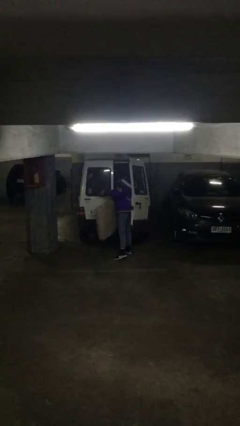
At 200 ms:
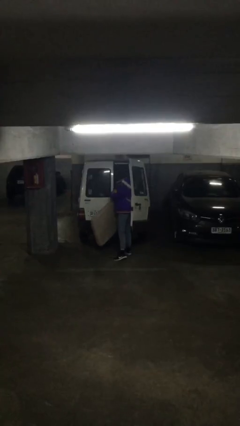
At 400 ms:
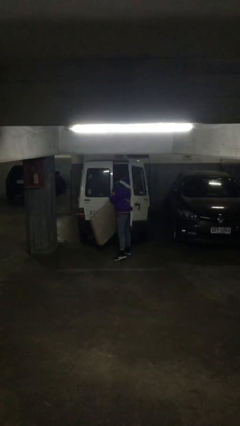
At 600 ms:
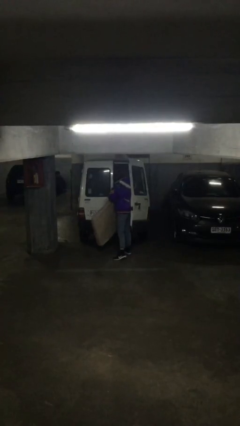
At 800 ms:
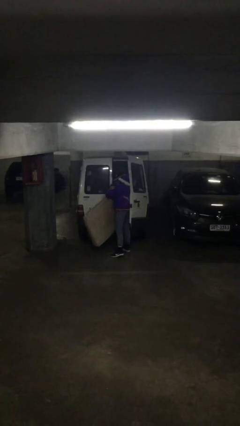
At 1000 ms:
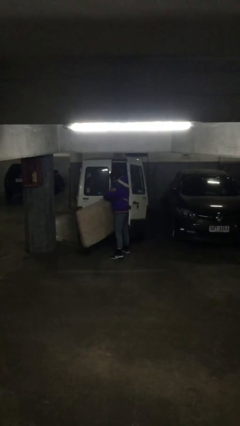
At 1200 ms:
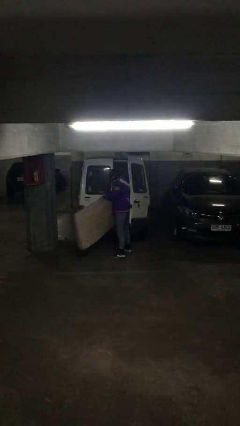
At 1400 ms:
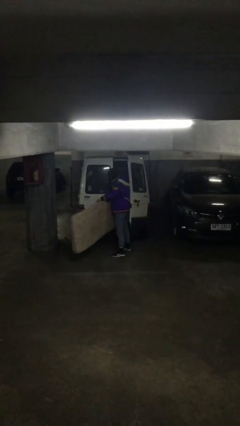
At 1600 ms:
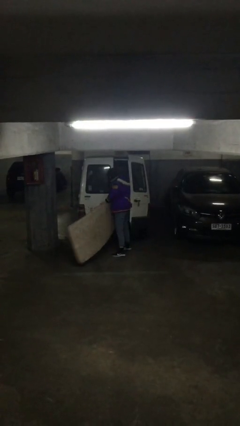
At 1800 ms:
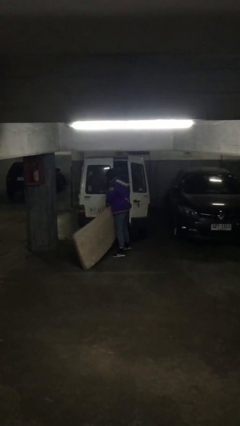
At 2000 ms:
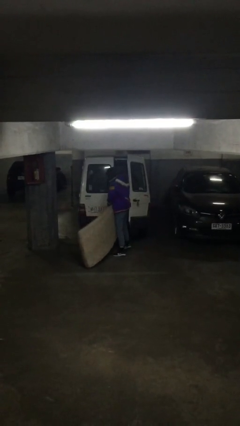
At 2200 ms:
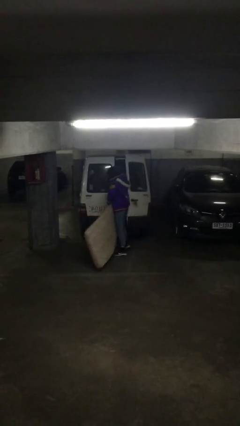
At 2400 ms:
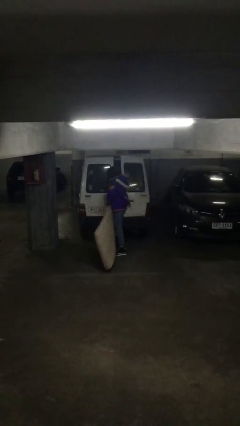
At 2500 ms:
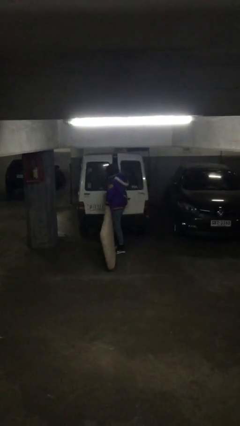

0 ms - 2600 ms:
person unloads car

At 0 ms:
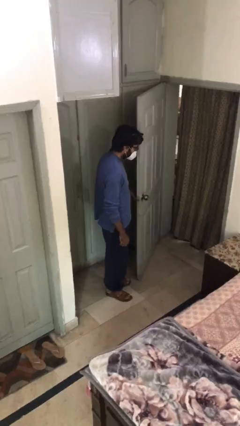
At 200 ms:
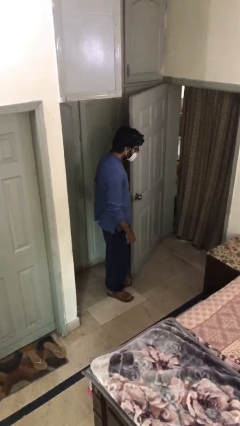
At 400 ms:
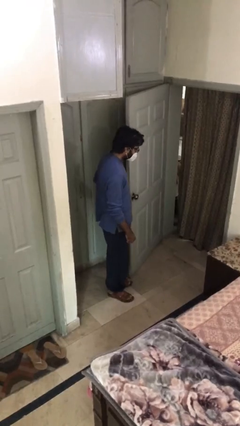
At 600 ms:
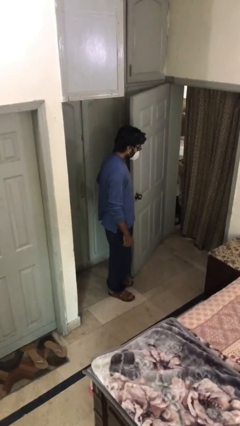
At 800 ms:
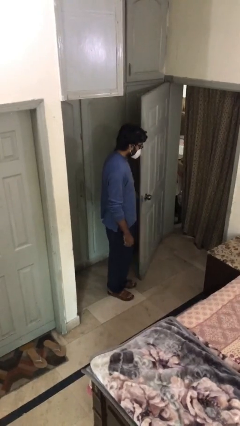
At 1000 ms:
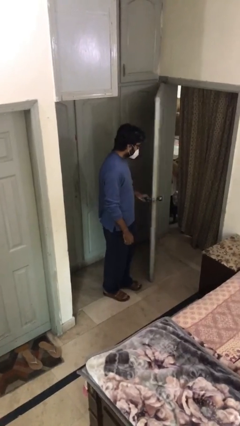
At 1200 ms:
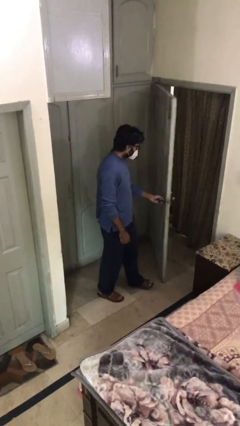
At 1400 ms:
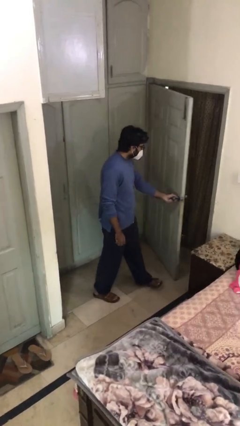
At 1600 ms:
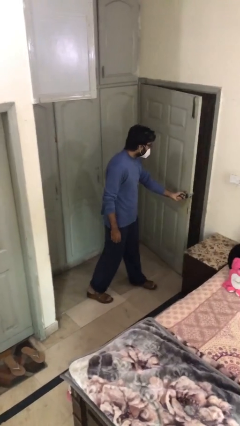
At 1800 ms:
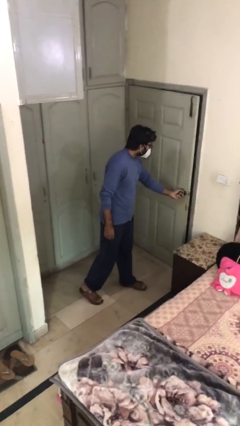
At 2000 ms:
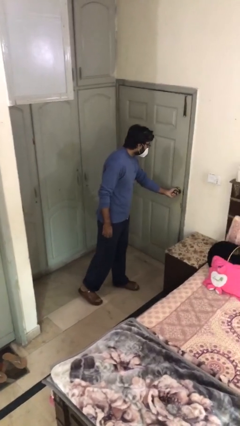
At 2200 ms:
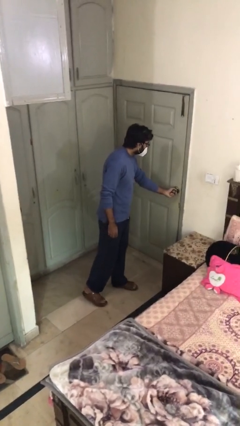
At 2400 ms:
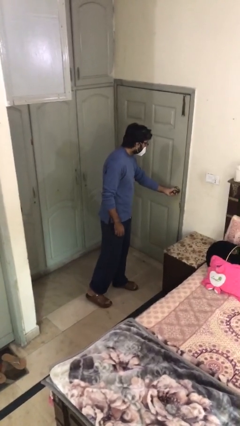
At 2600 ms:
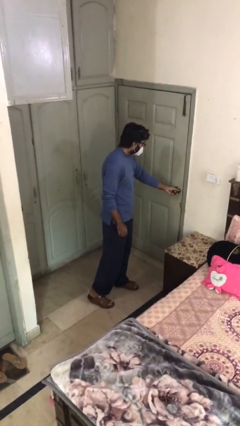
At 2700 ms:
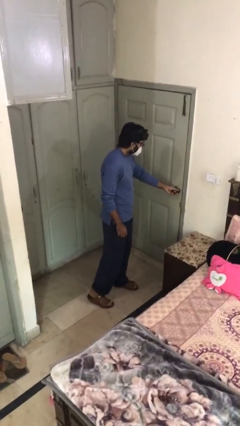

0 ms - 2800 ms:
person closes facility door

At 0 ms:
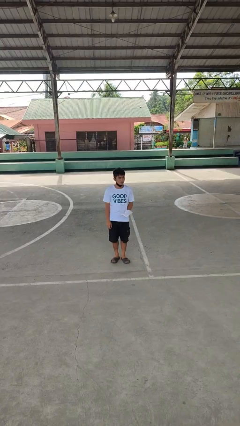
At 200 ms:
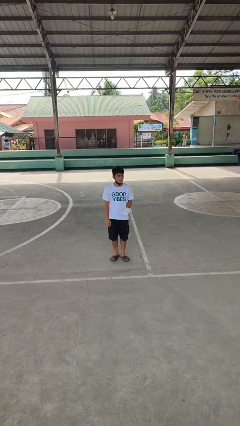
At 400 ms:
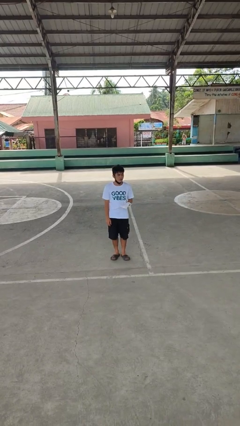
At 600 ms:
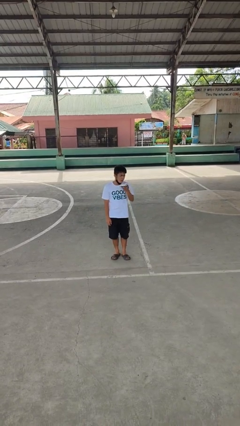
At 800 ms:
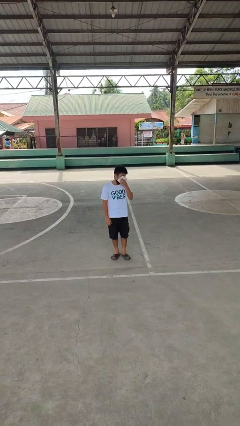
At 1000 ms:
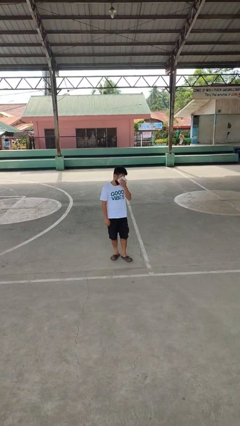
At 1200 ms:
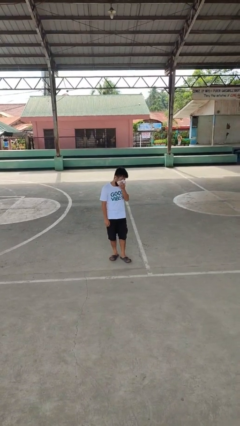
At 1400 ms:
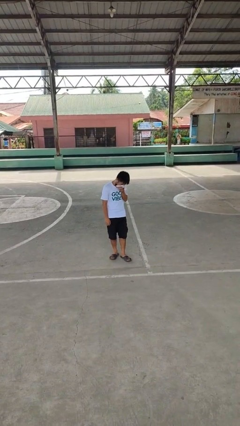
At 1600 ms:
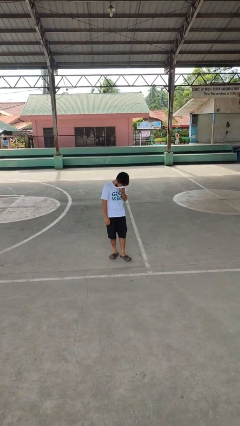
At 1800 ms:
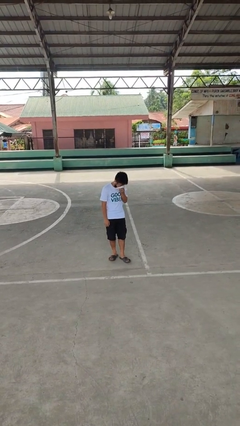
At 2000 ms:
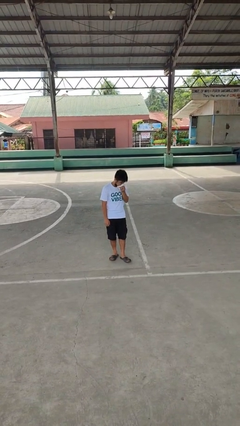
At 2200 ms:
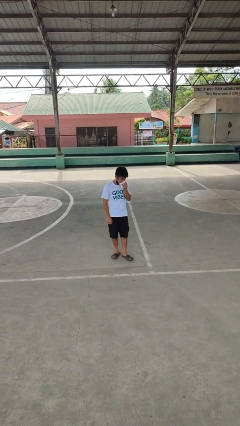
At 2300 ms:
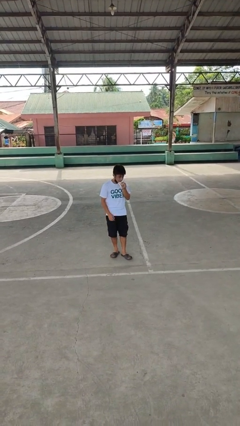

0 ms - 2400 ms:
person blows nose

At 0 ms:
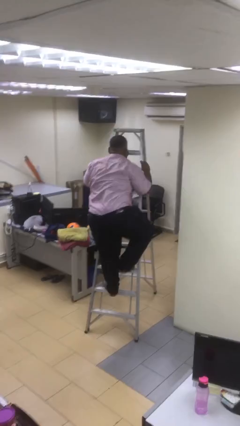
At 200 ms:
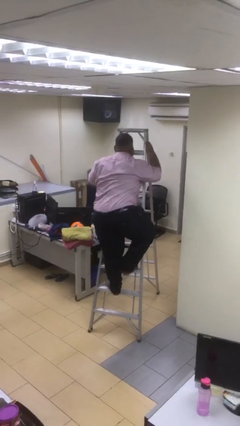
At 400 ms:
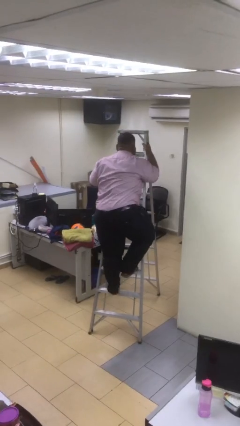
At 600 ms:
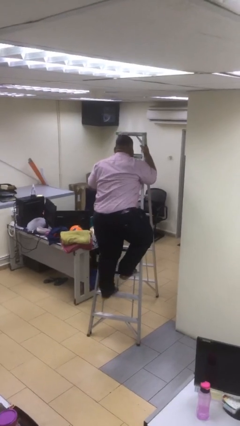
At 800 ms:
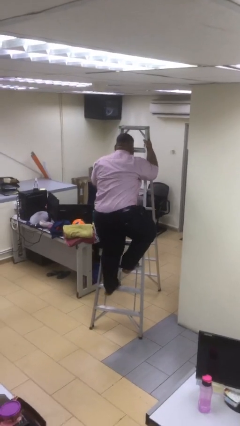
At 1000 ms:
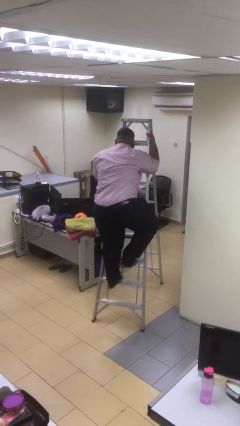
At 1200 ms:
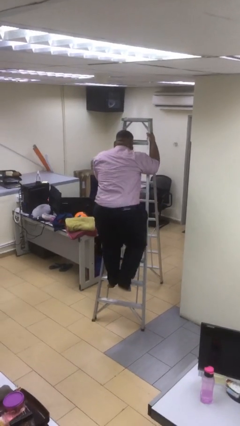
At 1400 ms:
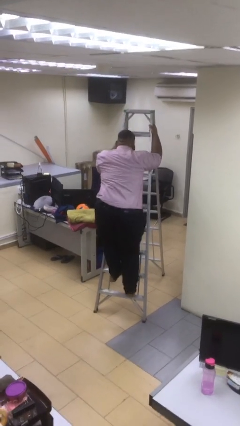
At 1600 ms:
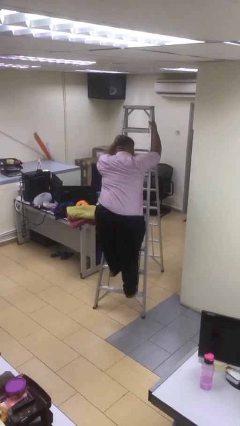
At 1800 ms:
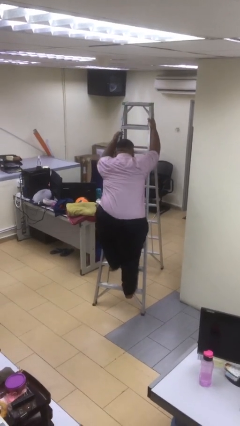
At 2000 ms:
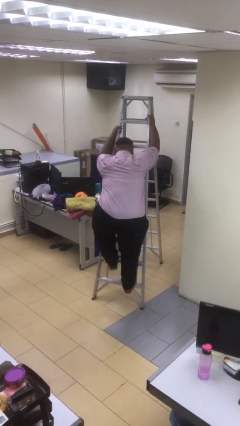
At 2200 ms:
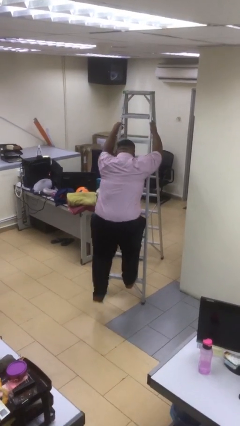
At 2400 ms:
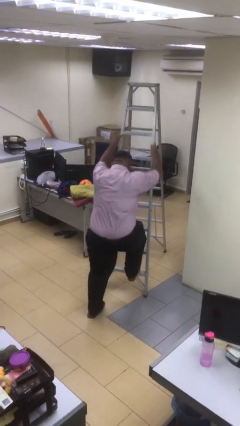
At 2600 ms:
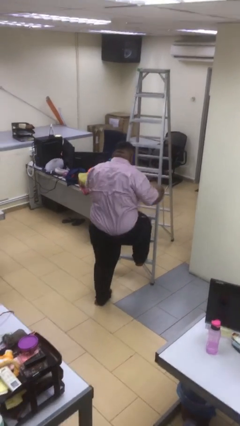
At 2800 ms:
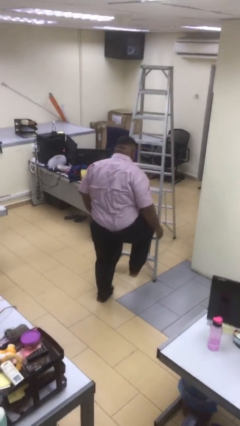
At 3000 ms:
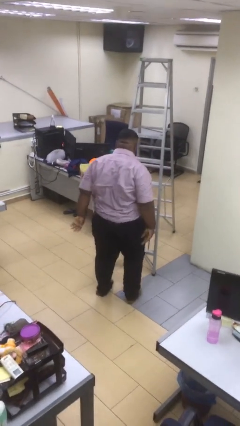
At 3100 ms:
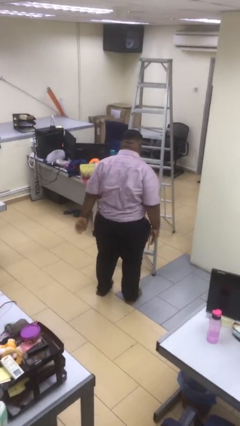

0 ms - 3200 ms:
person climbs down ladder

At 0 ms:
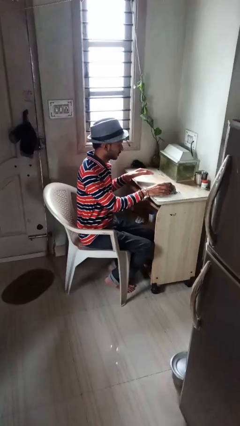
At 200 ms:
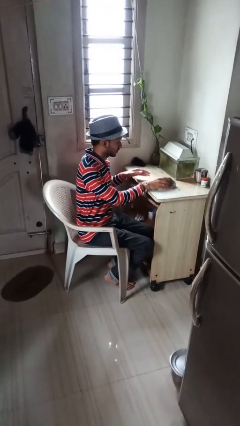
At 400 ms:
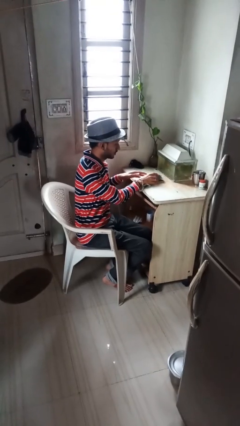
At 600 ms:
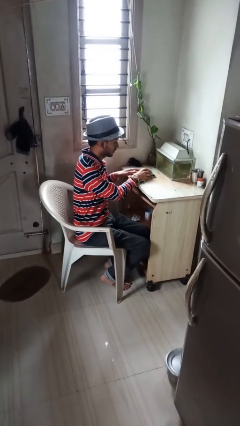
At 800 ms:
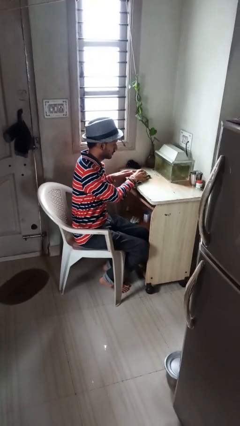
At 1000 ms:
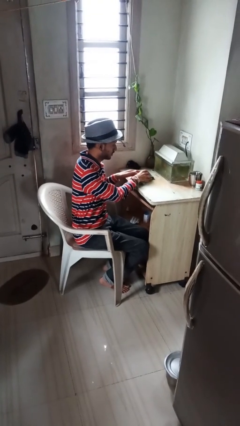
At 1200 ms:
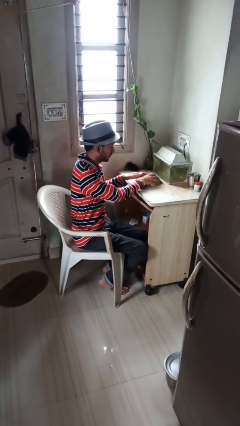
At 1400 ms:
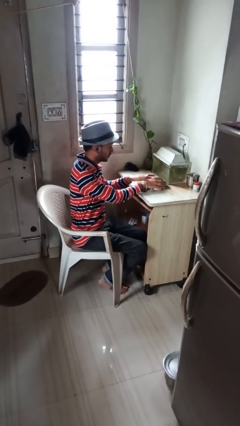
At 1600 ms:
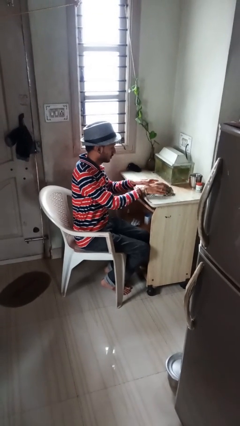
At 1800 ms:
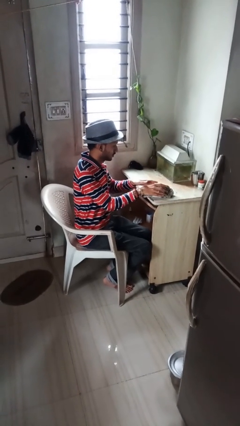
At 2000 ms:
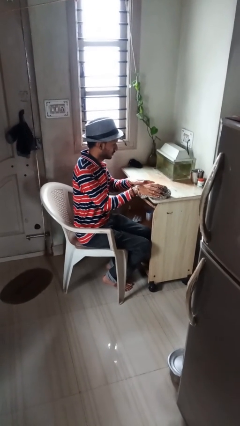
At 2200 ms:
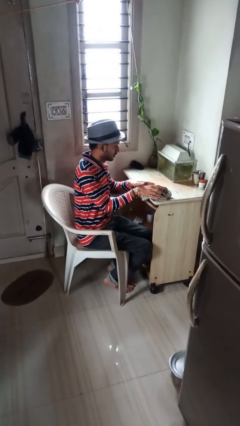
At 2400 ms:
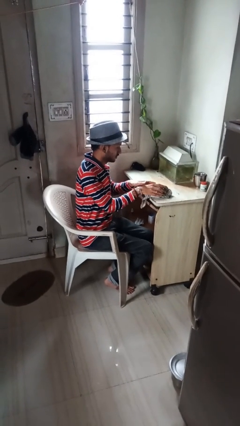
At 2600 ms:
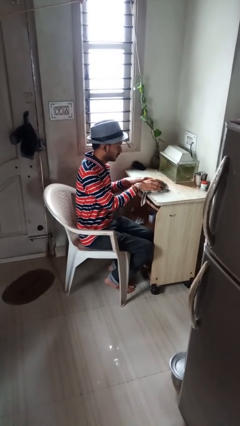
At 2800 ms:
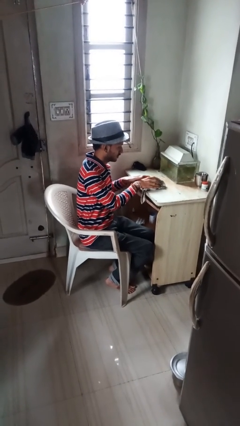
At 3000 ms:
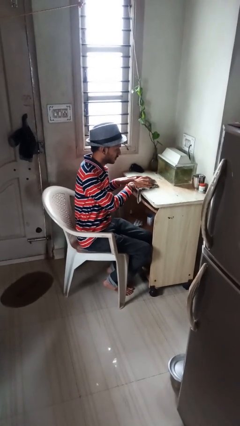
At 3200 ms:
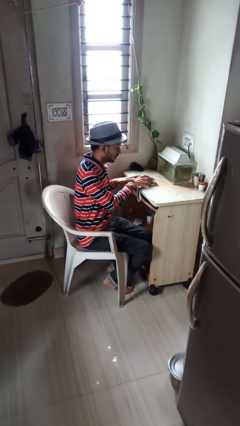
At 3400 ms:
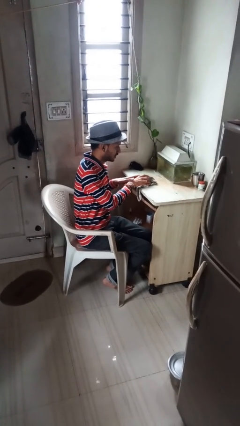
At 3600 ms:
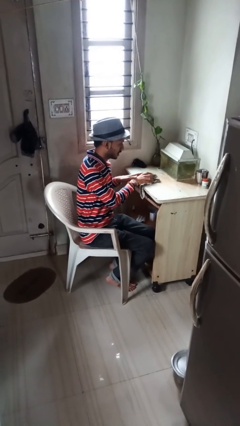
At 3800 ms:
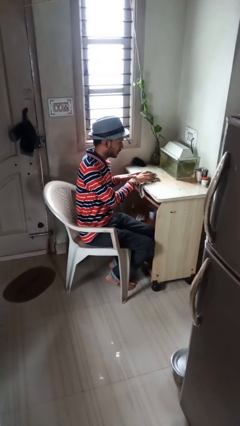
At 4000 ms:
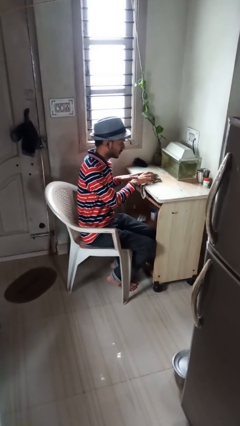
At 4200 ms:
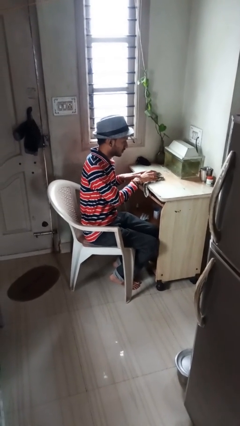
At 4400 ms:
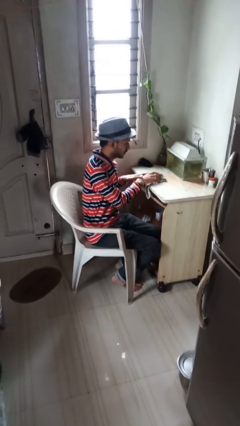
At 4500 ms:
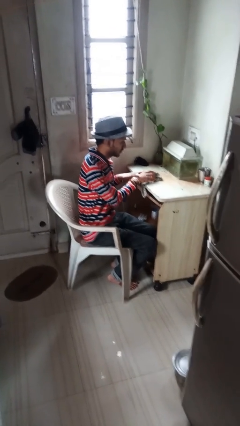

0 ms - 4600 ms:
person cleans table with rag

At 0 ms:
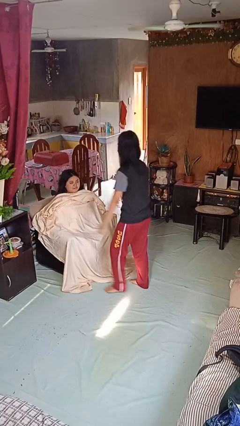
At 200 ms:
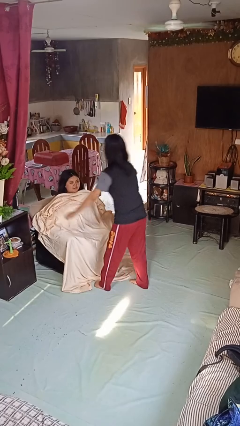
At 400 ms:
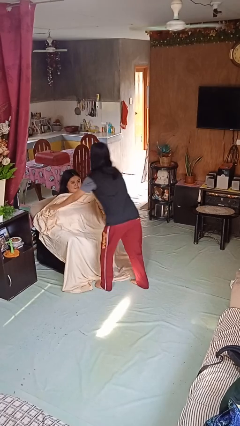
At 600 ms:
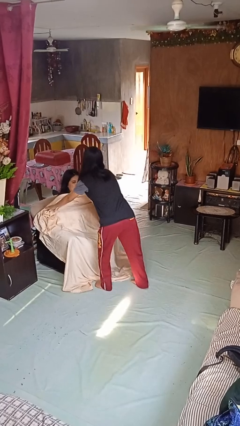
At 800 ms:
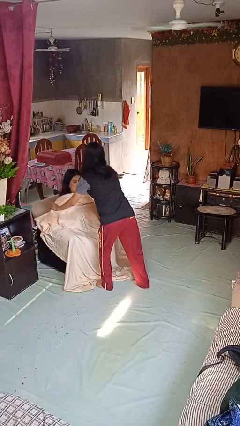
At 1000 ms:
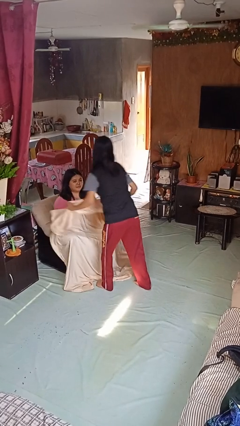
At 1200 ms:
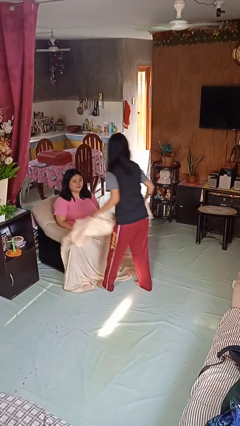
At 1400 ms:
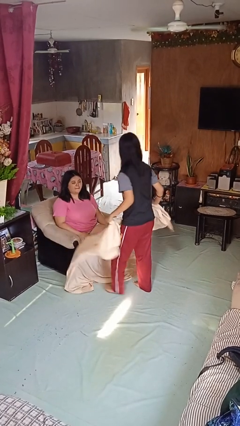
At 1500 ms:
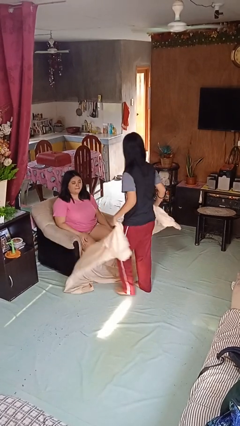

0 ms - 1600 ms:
person uncovers friend with blanket
